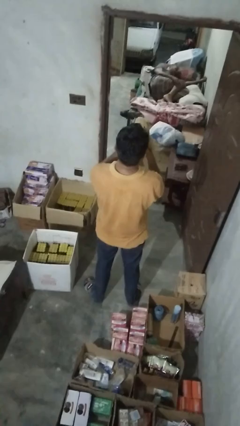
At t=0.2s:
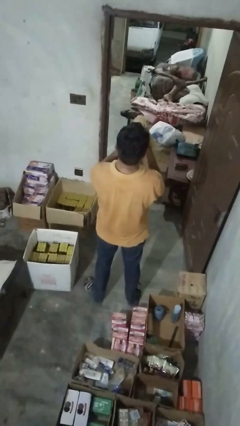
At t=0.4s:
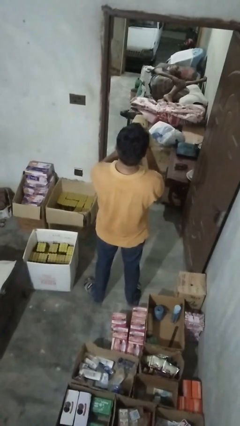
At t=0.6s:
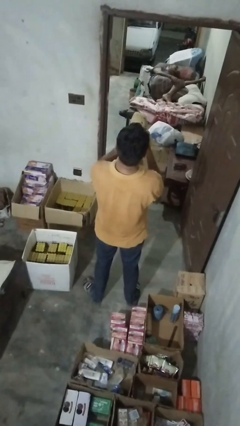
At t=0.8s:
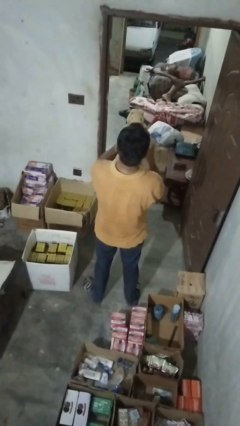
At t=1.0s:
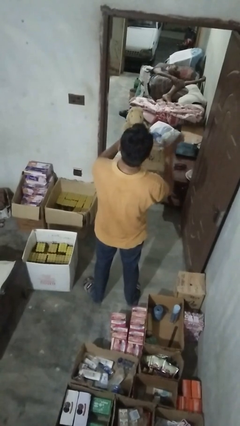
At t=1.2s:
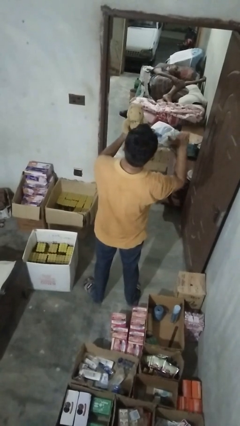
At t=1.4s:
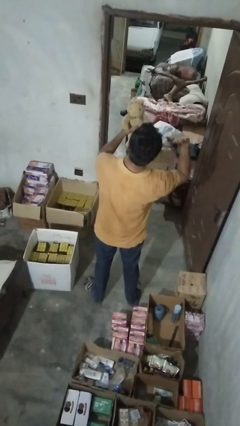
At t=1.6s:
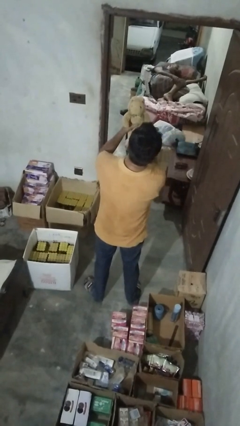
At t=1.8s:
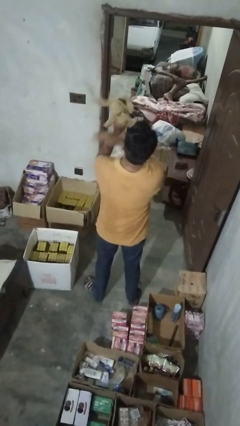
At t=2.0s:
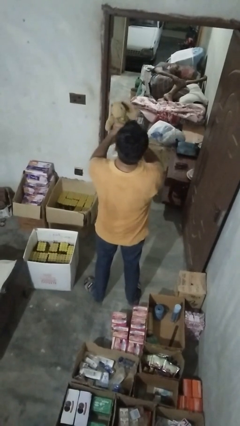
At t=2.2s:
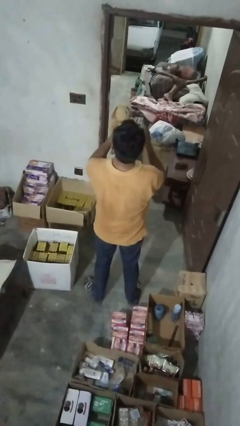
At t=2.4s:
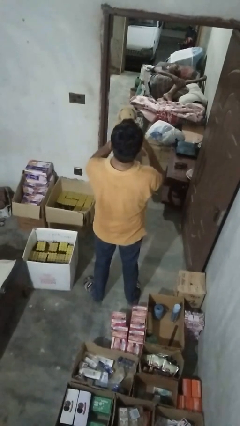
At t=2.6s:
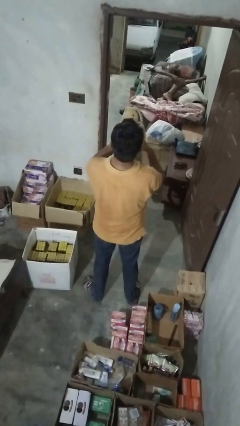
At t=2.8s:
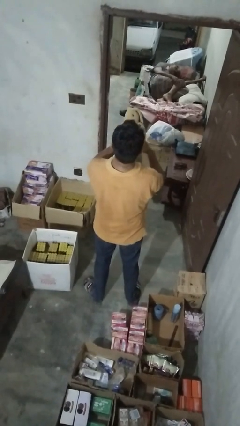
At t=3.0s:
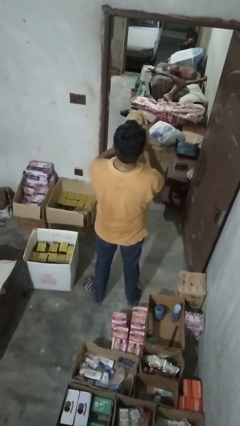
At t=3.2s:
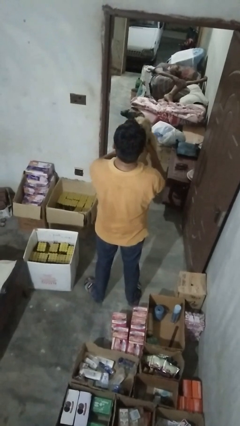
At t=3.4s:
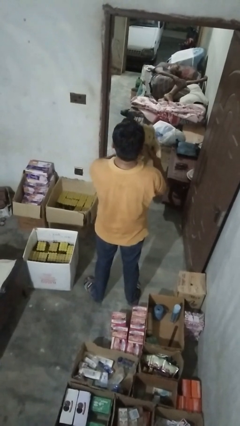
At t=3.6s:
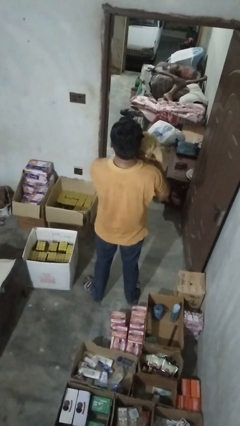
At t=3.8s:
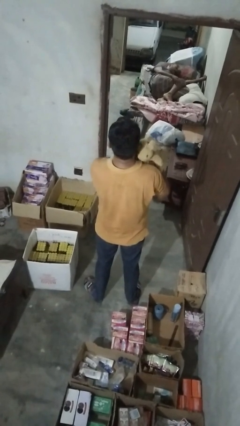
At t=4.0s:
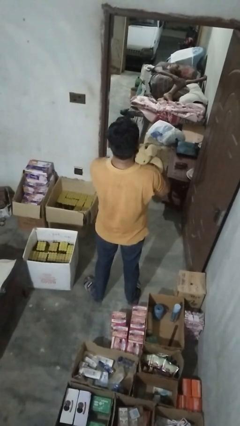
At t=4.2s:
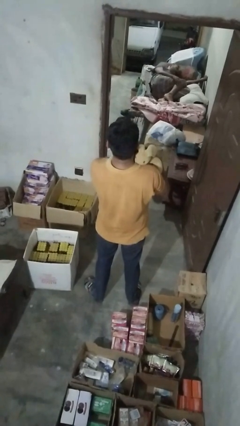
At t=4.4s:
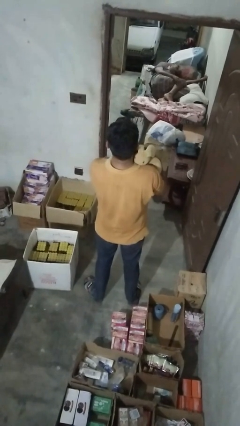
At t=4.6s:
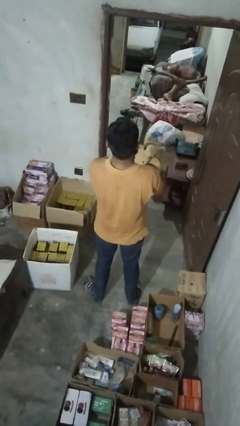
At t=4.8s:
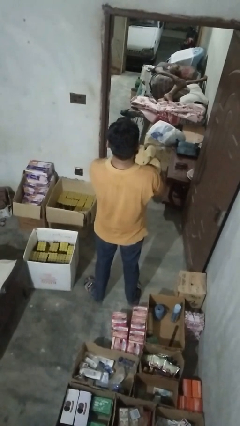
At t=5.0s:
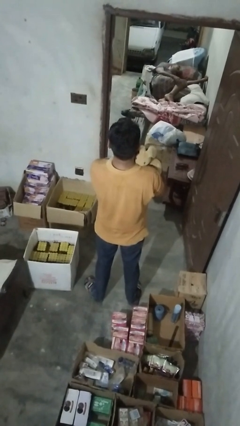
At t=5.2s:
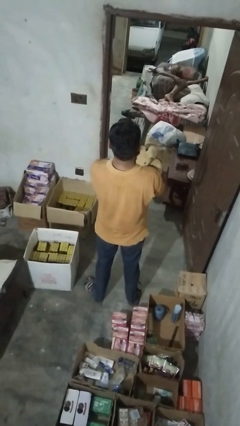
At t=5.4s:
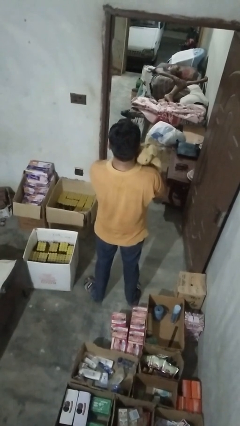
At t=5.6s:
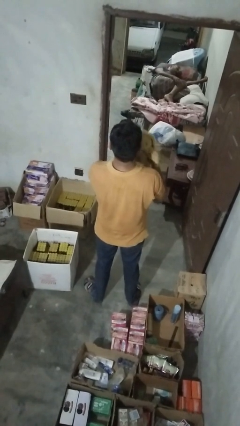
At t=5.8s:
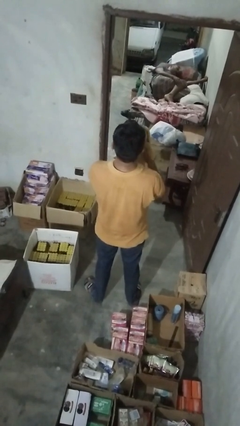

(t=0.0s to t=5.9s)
person hugs stuffed animal

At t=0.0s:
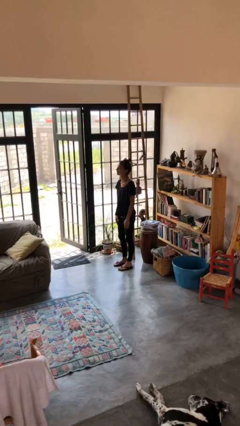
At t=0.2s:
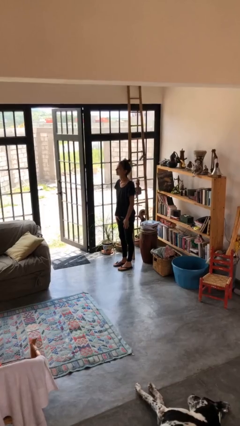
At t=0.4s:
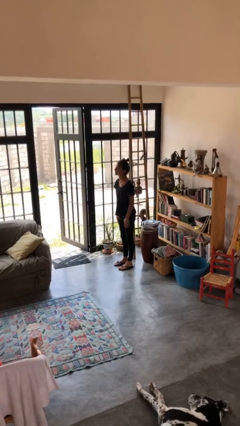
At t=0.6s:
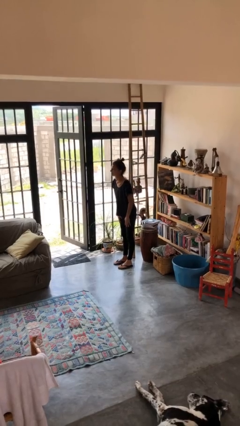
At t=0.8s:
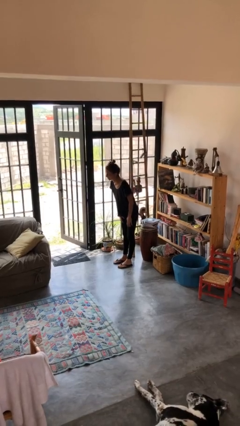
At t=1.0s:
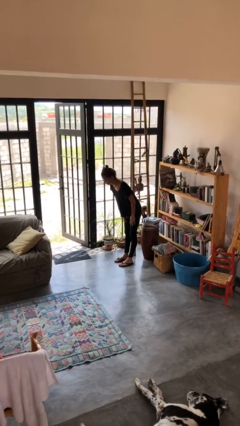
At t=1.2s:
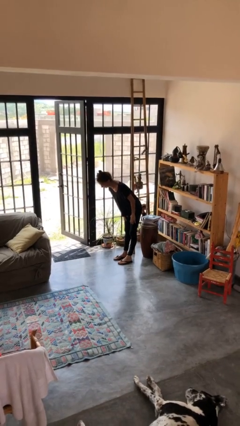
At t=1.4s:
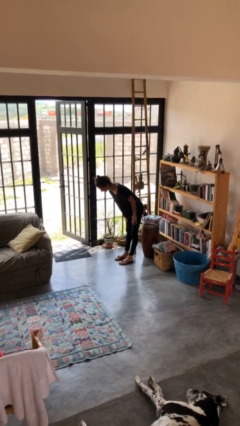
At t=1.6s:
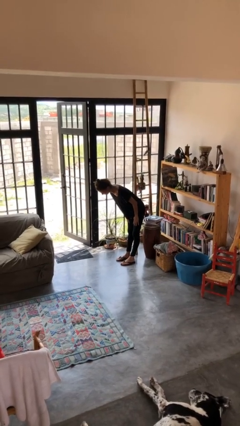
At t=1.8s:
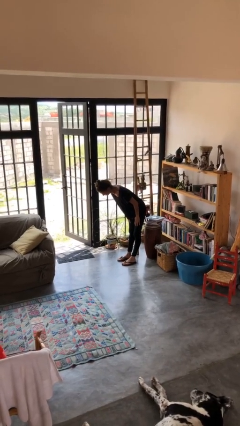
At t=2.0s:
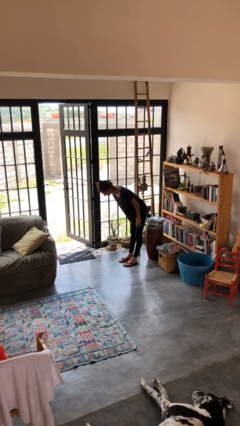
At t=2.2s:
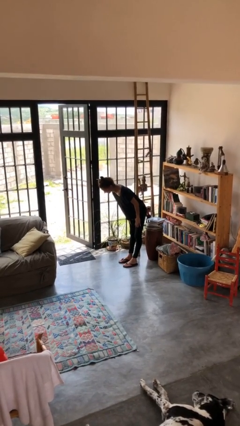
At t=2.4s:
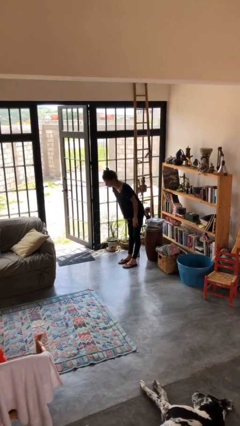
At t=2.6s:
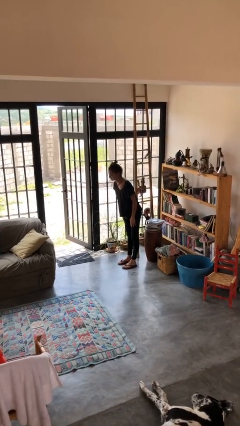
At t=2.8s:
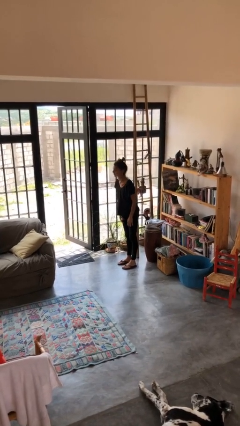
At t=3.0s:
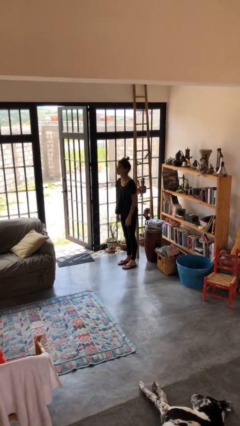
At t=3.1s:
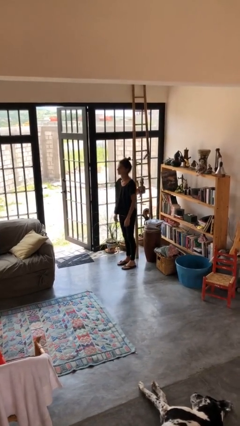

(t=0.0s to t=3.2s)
person bows

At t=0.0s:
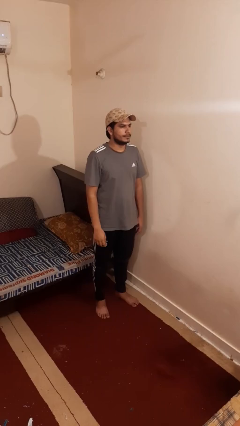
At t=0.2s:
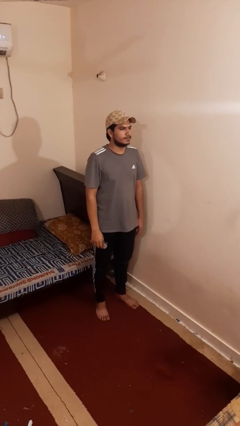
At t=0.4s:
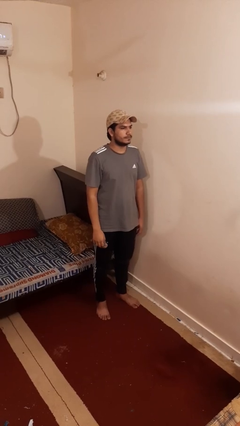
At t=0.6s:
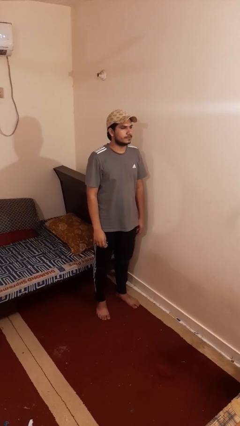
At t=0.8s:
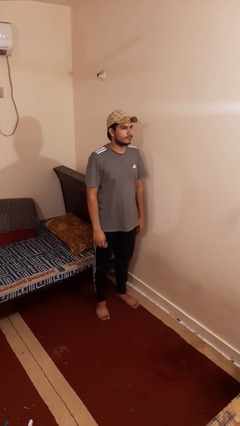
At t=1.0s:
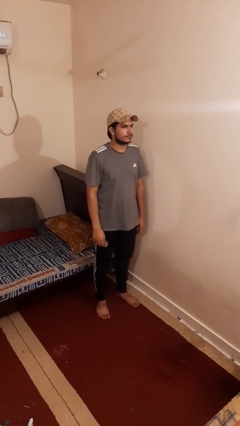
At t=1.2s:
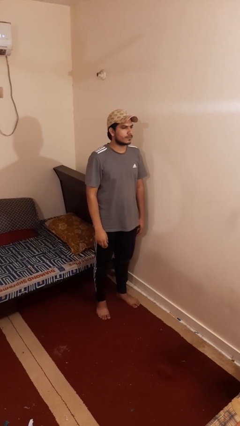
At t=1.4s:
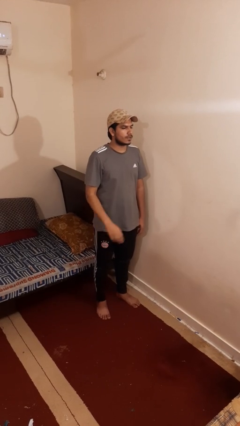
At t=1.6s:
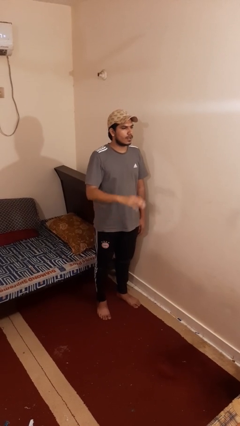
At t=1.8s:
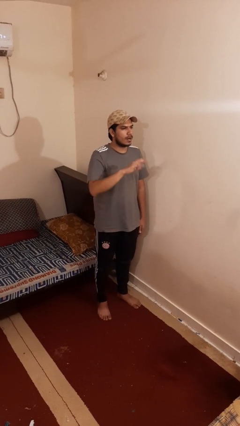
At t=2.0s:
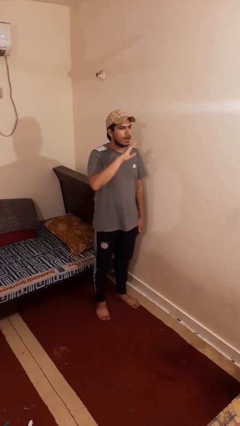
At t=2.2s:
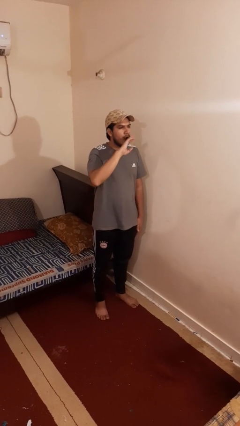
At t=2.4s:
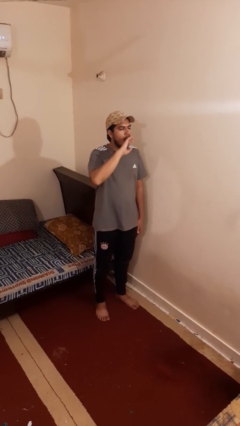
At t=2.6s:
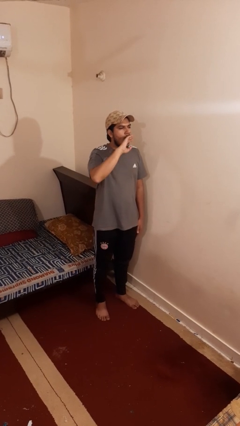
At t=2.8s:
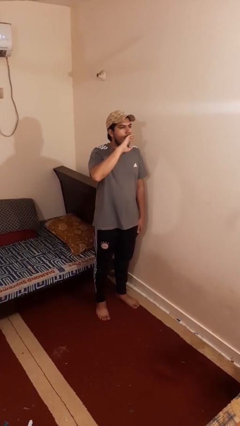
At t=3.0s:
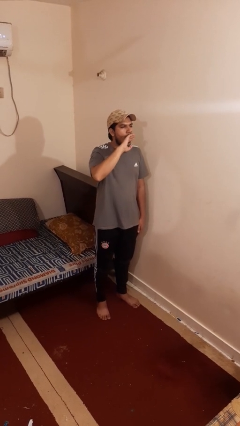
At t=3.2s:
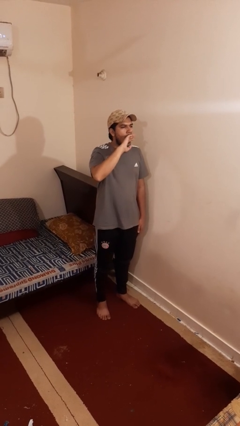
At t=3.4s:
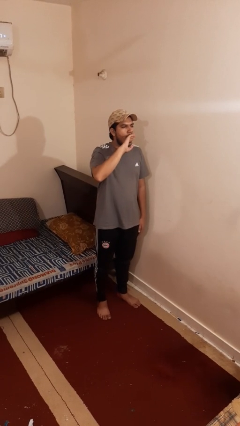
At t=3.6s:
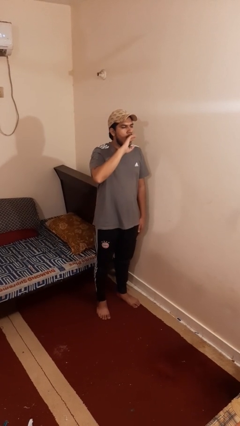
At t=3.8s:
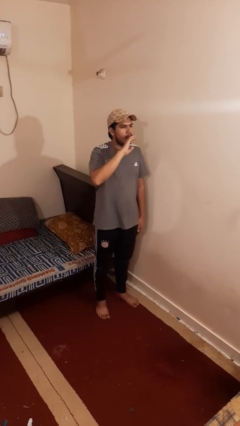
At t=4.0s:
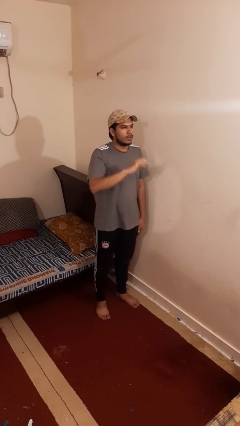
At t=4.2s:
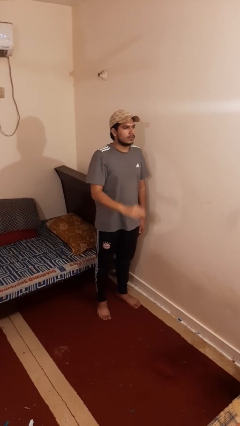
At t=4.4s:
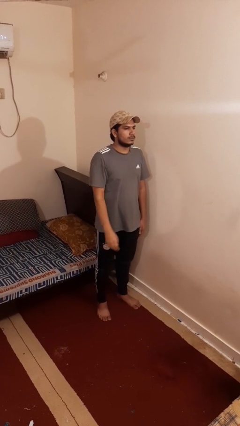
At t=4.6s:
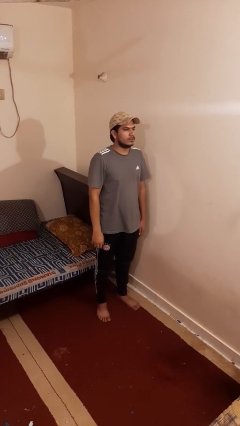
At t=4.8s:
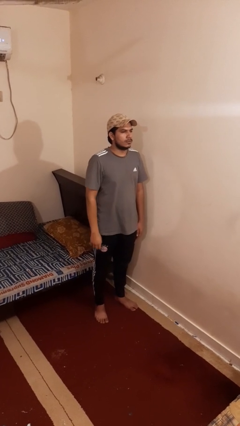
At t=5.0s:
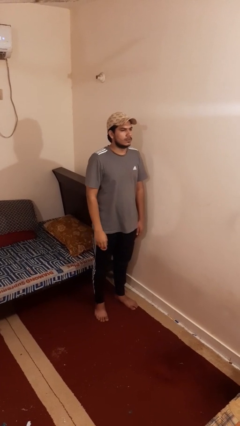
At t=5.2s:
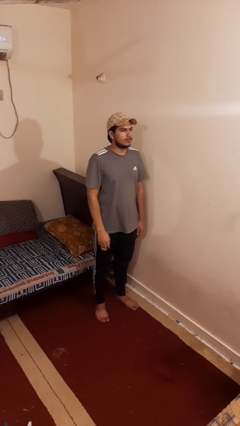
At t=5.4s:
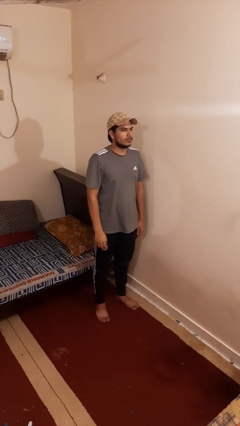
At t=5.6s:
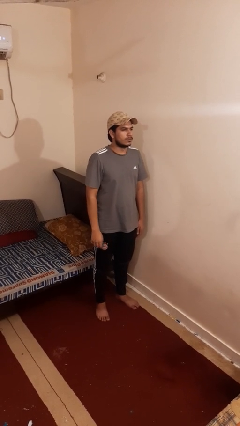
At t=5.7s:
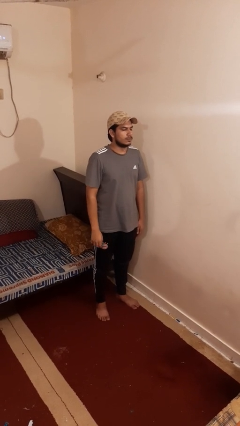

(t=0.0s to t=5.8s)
person yawns

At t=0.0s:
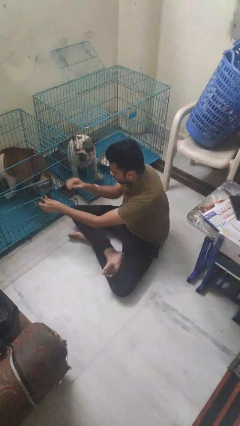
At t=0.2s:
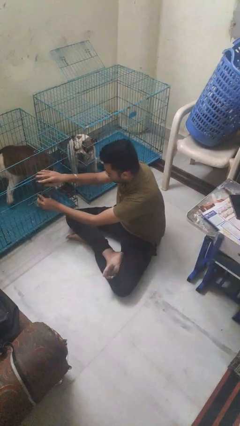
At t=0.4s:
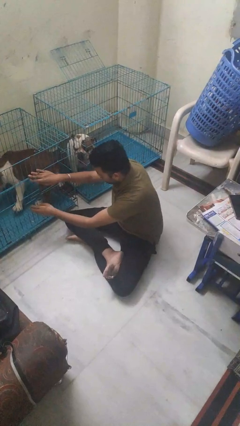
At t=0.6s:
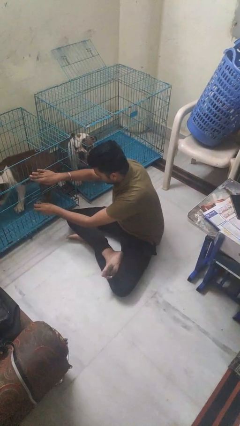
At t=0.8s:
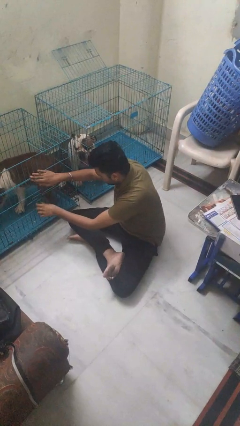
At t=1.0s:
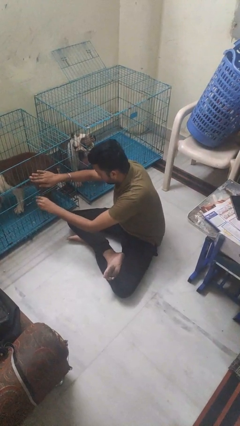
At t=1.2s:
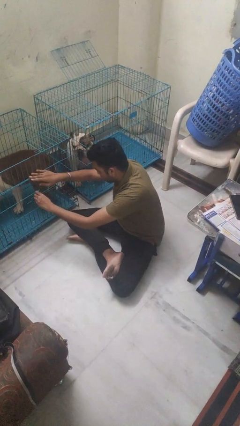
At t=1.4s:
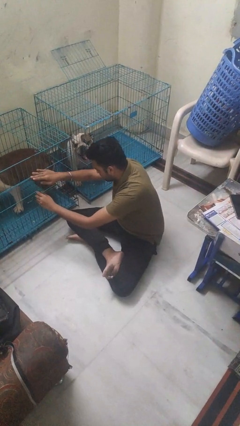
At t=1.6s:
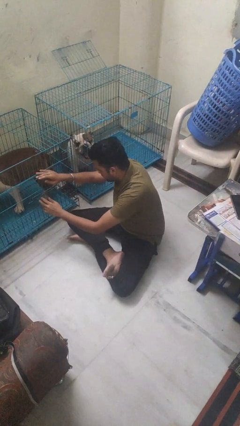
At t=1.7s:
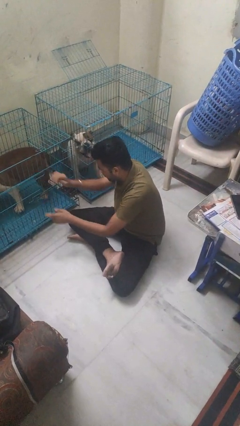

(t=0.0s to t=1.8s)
person crates dog

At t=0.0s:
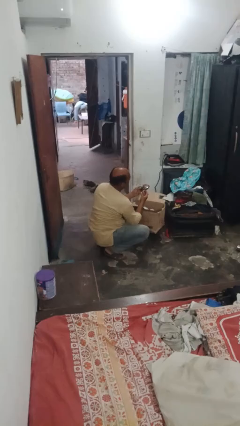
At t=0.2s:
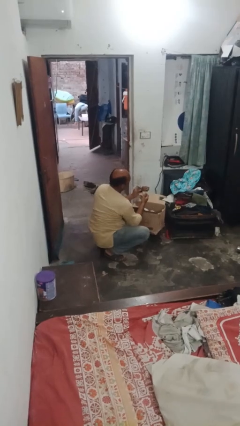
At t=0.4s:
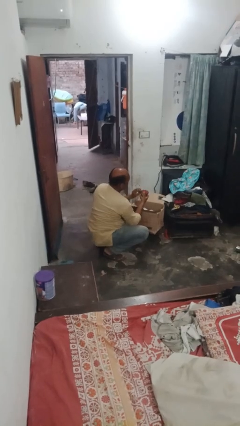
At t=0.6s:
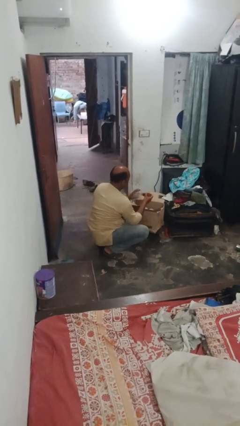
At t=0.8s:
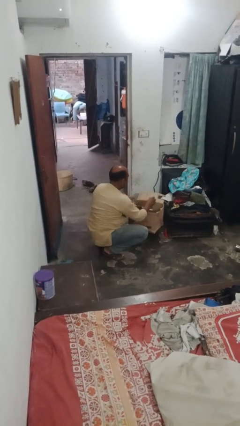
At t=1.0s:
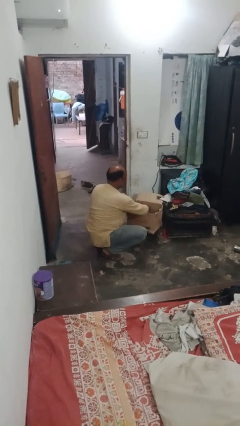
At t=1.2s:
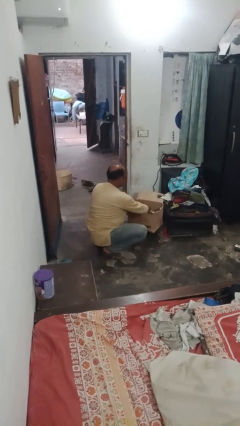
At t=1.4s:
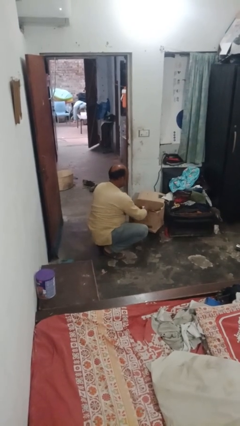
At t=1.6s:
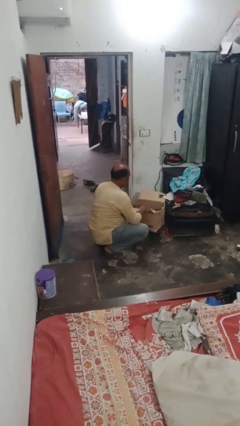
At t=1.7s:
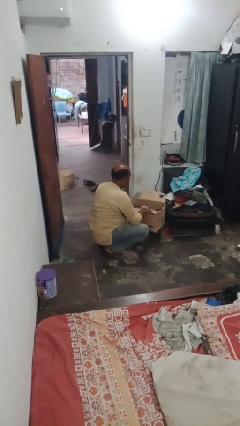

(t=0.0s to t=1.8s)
person puts object into box
